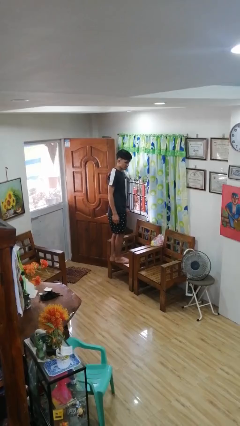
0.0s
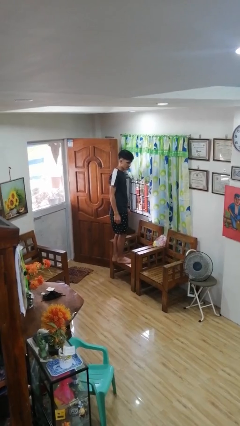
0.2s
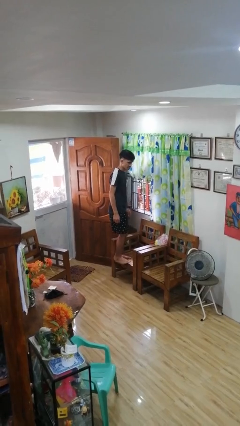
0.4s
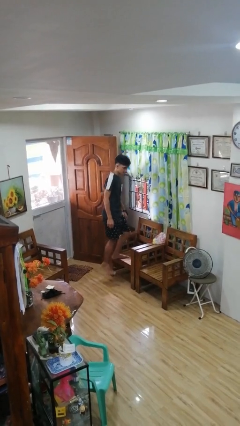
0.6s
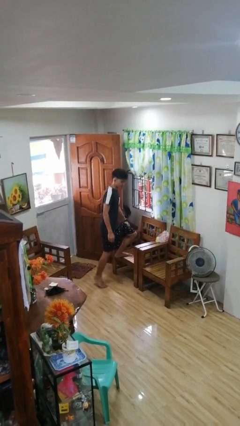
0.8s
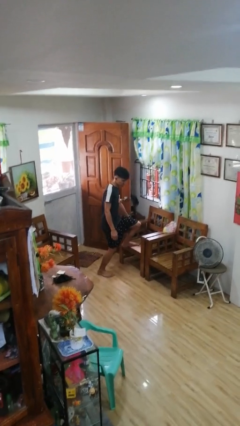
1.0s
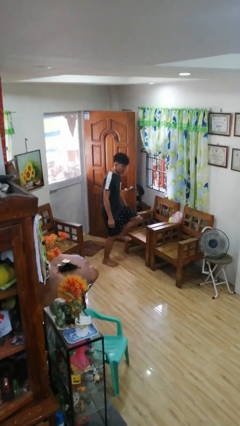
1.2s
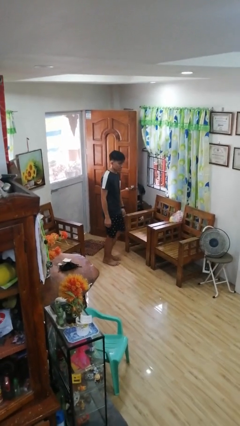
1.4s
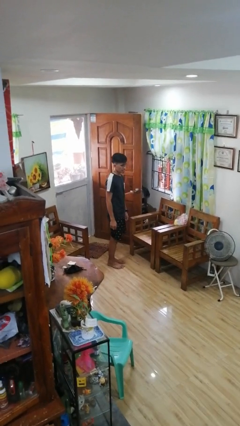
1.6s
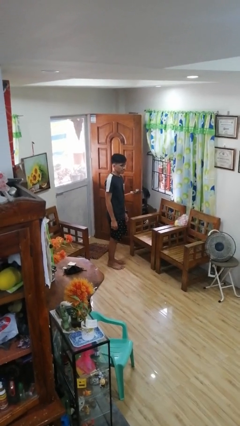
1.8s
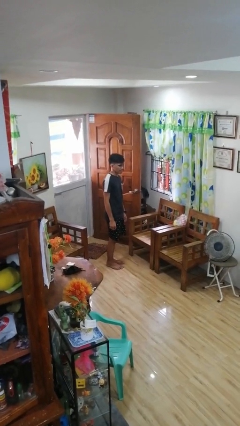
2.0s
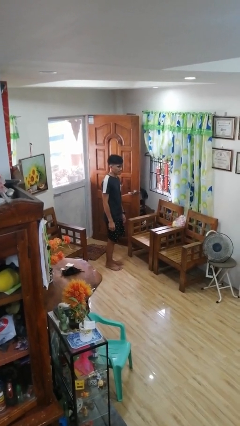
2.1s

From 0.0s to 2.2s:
person climbs off chair

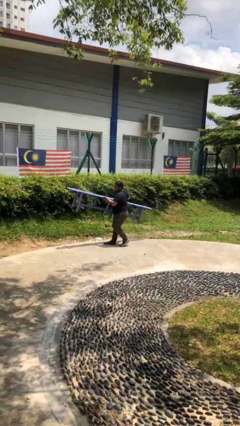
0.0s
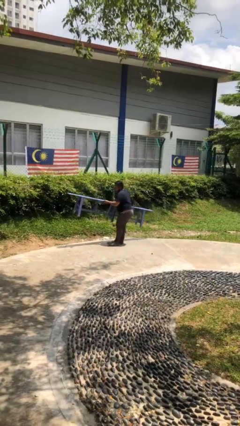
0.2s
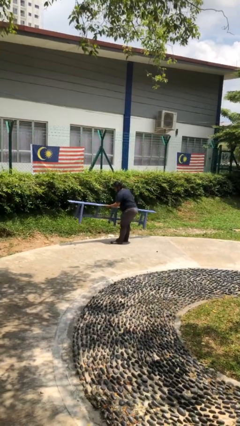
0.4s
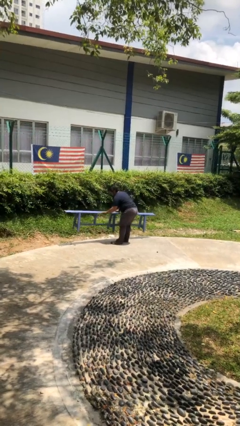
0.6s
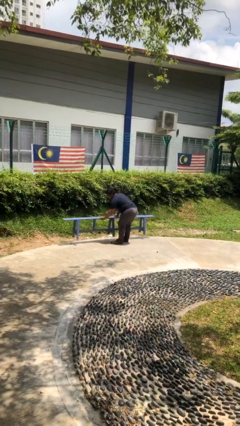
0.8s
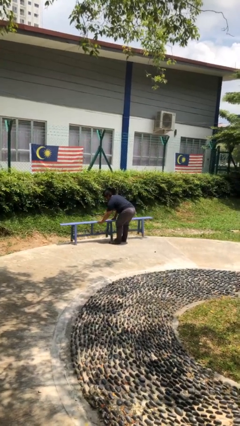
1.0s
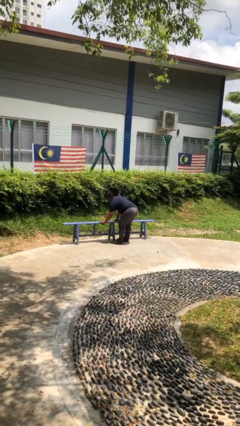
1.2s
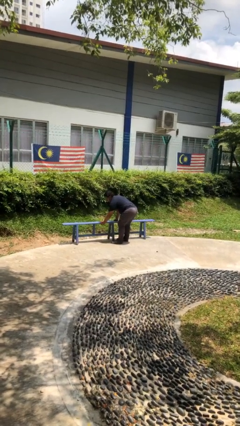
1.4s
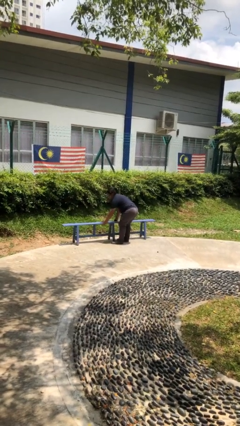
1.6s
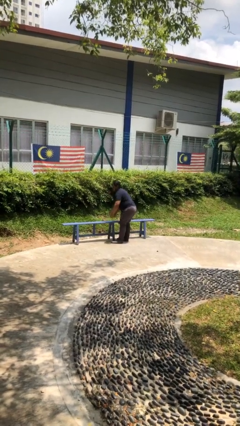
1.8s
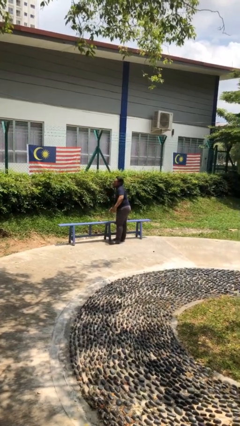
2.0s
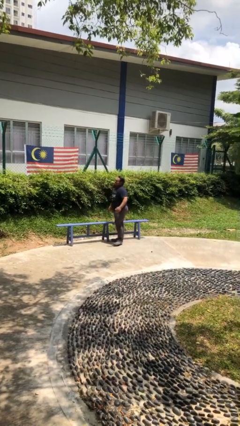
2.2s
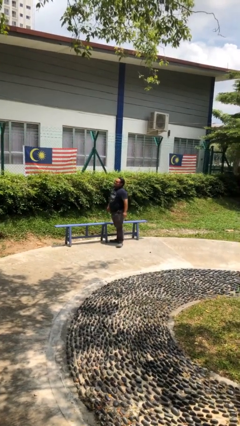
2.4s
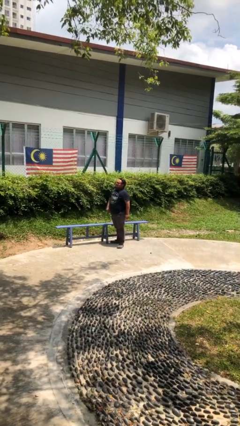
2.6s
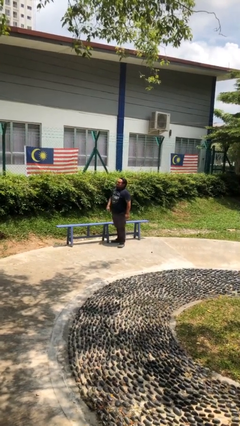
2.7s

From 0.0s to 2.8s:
person puts down object on floor

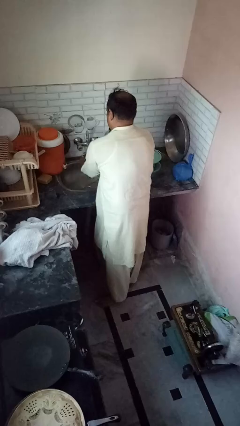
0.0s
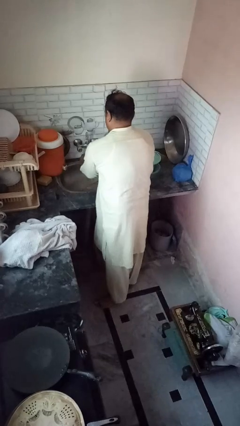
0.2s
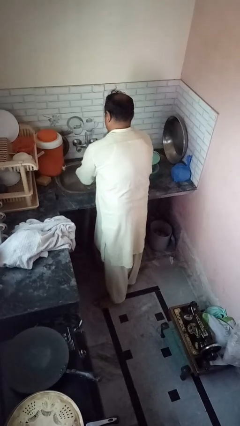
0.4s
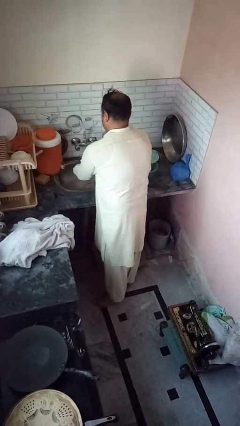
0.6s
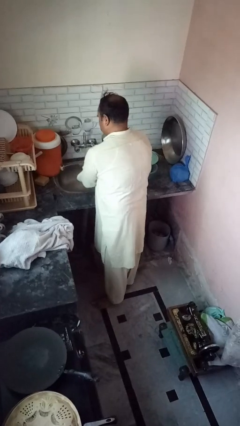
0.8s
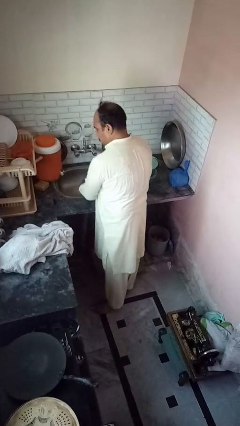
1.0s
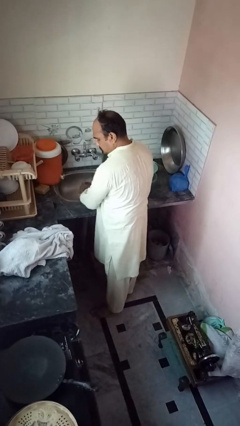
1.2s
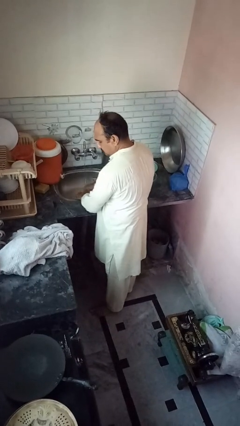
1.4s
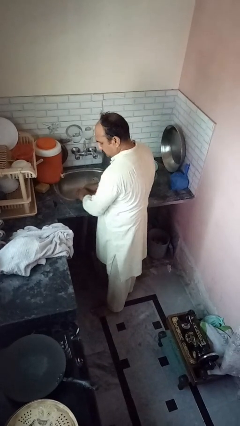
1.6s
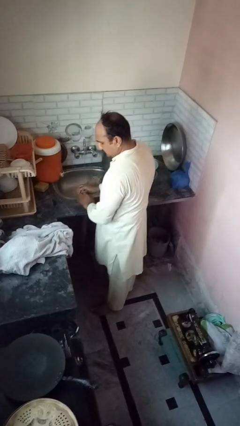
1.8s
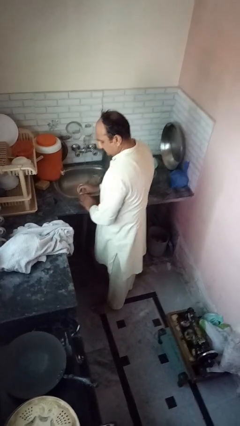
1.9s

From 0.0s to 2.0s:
person washes hands

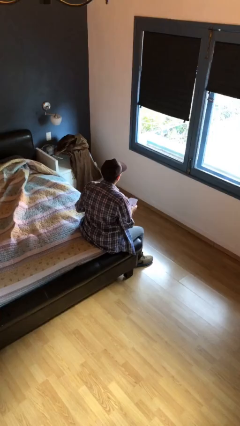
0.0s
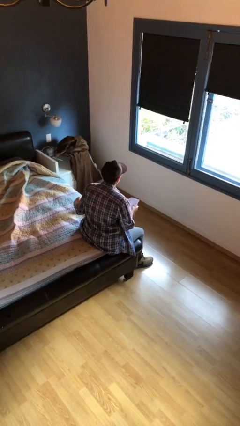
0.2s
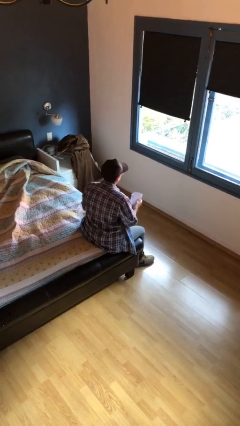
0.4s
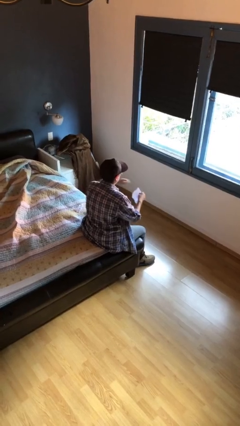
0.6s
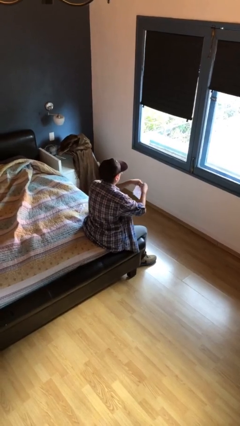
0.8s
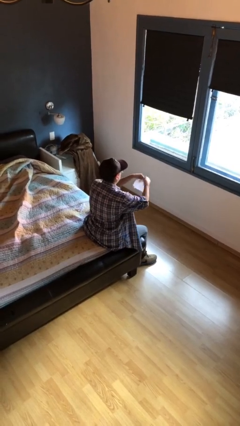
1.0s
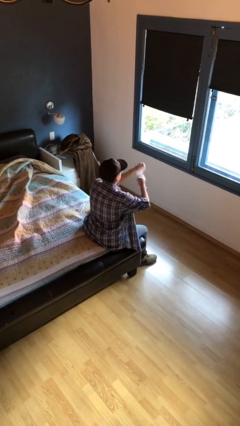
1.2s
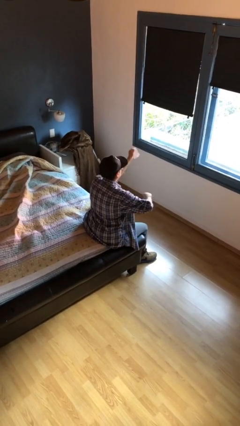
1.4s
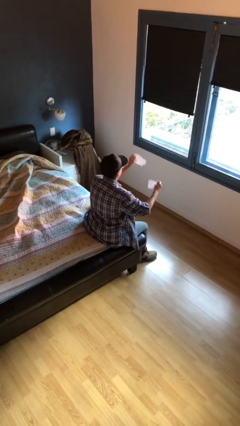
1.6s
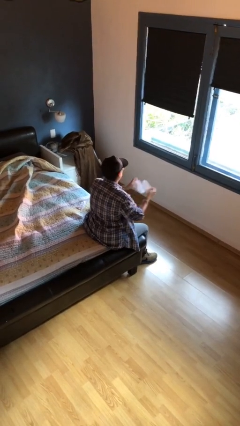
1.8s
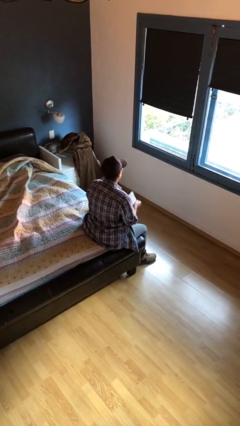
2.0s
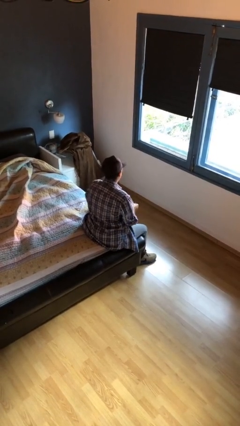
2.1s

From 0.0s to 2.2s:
person tears paper

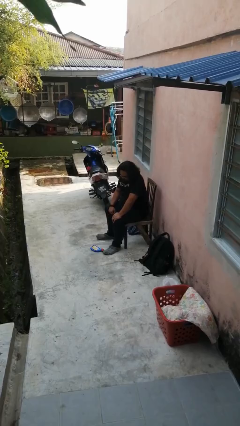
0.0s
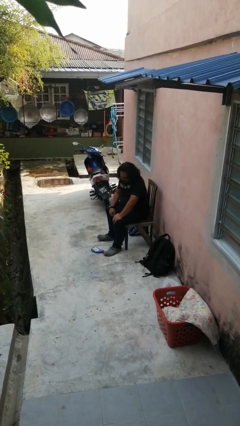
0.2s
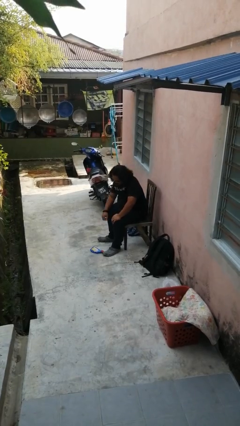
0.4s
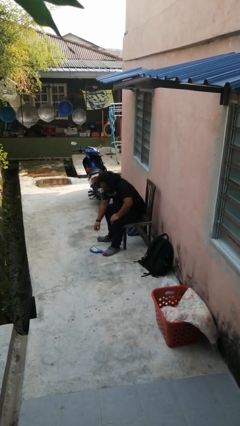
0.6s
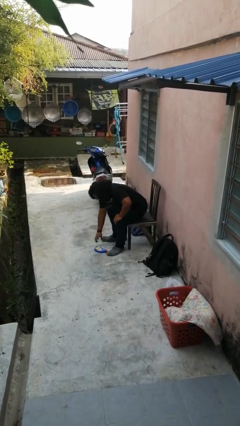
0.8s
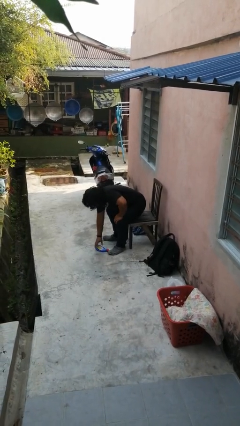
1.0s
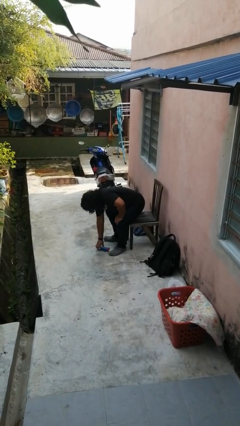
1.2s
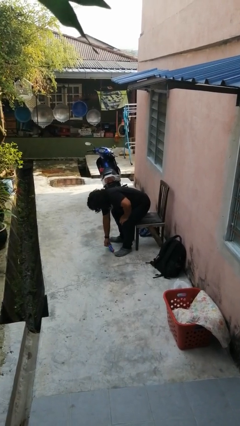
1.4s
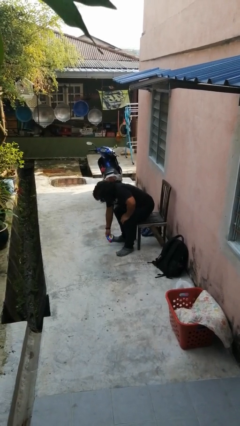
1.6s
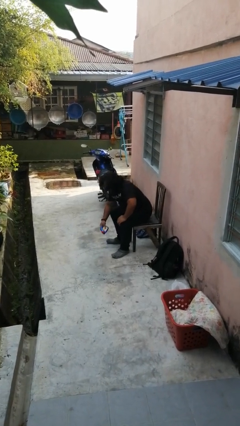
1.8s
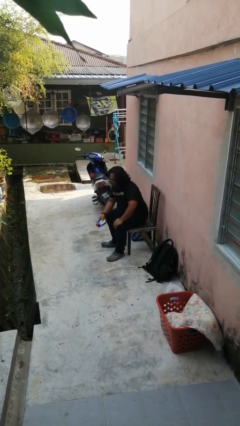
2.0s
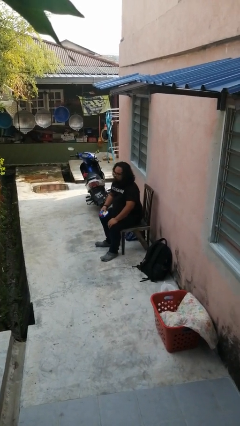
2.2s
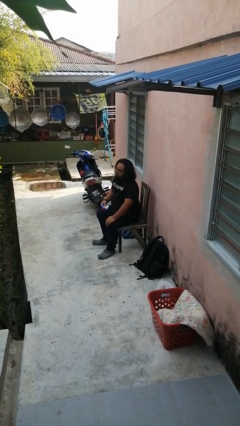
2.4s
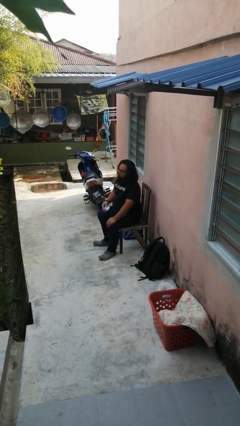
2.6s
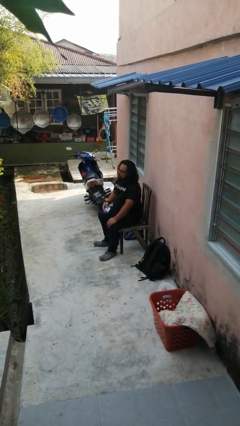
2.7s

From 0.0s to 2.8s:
person picks up object from floor

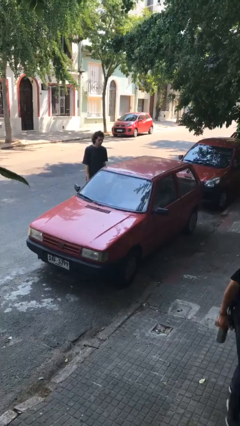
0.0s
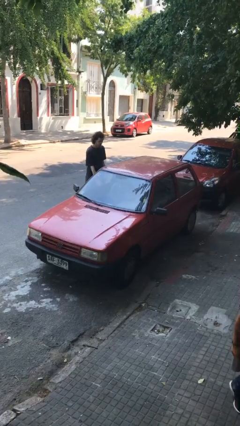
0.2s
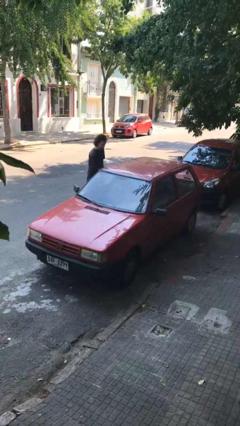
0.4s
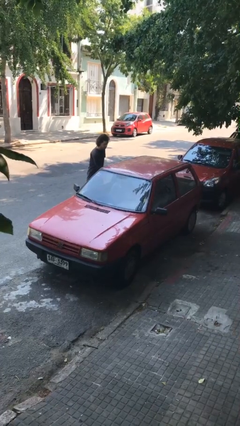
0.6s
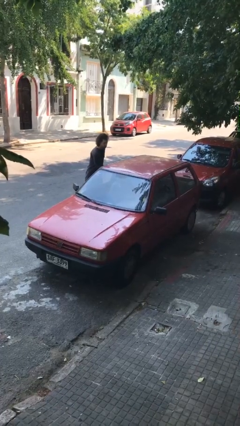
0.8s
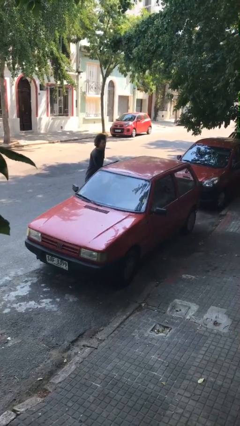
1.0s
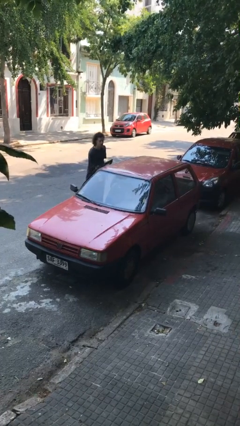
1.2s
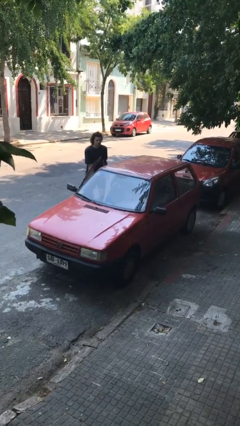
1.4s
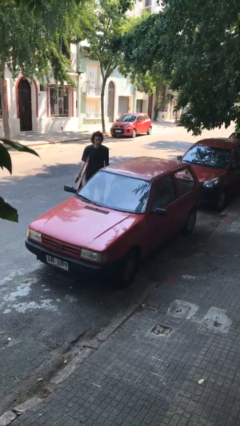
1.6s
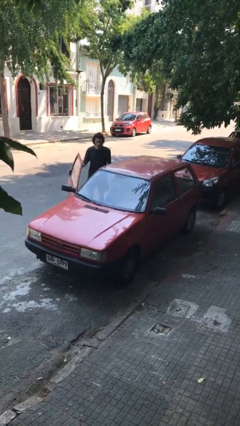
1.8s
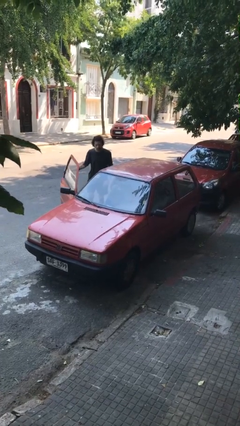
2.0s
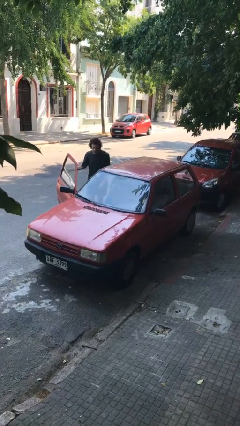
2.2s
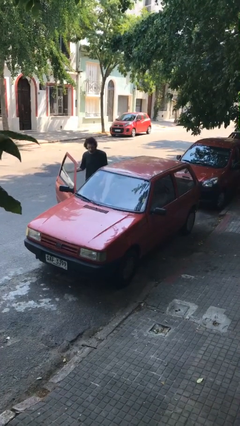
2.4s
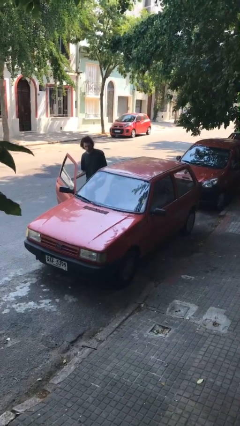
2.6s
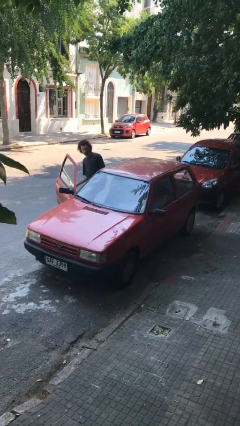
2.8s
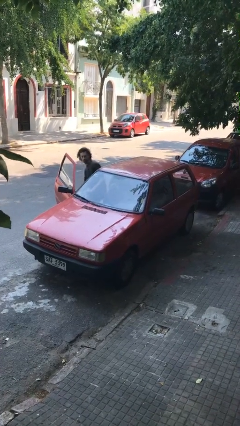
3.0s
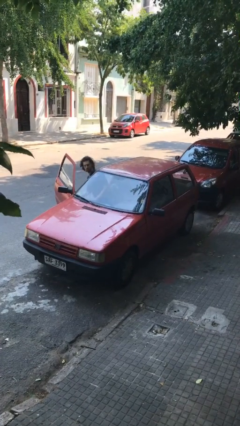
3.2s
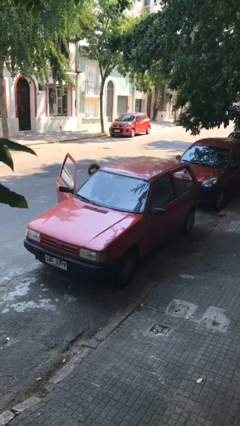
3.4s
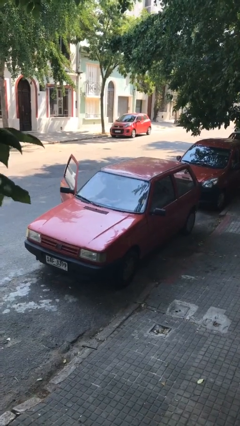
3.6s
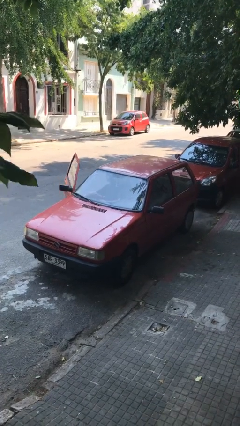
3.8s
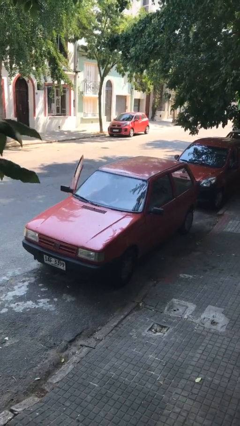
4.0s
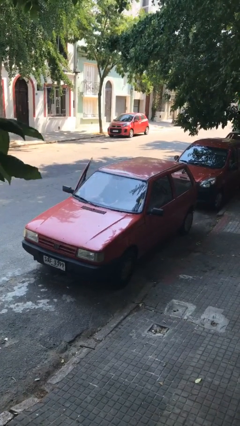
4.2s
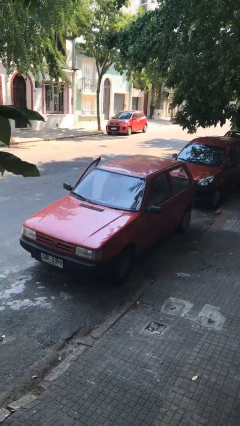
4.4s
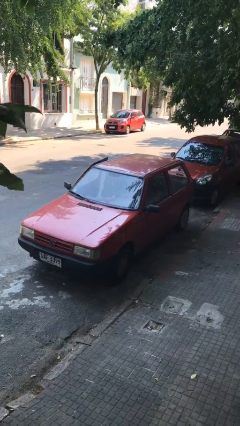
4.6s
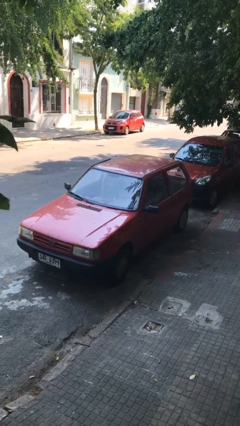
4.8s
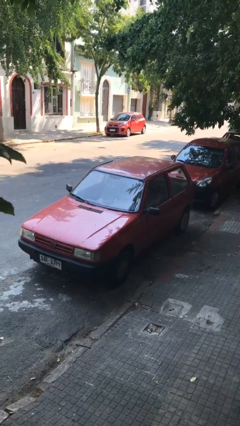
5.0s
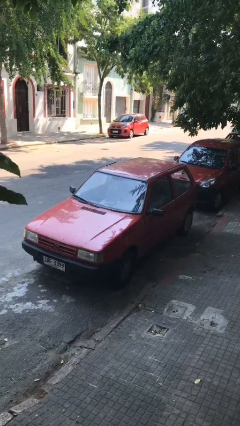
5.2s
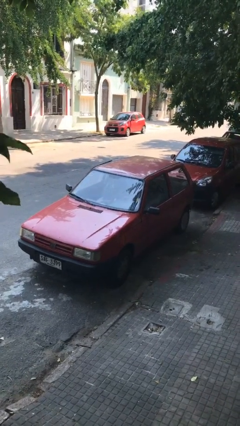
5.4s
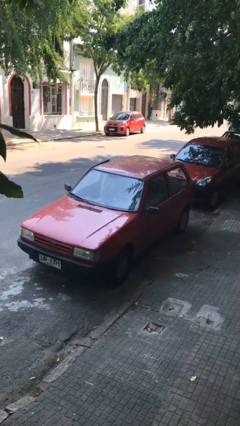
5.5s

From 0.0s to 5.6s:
car picks up person
